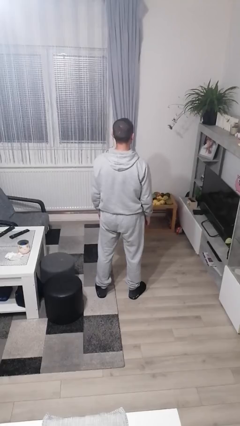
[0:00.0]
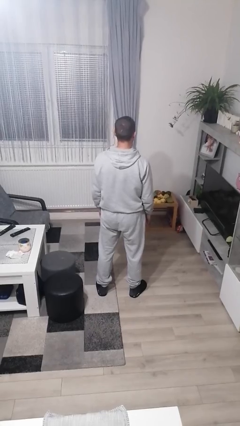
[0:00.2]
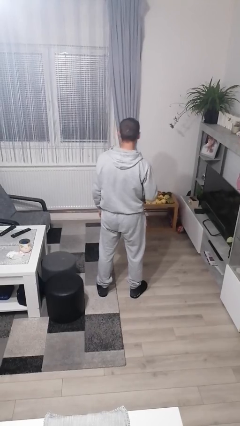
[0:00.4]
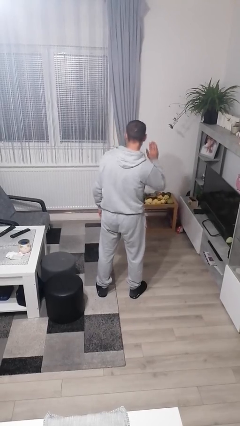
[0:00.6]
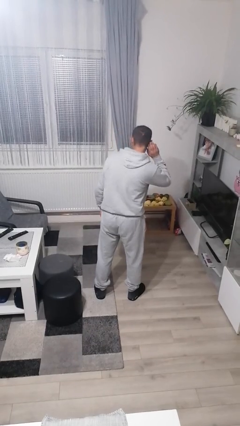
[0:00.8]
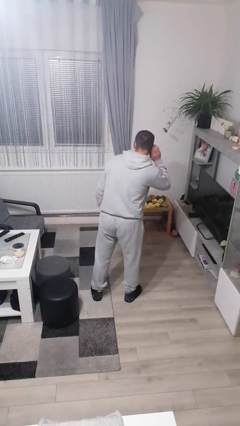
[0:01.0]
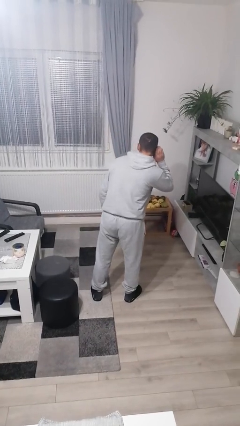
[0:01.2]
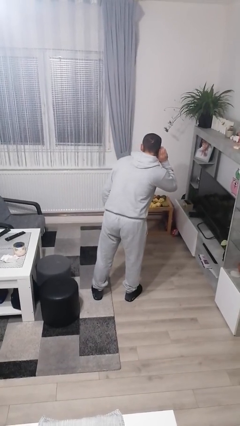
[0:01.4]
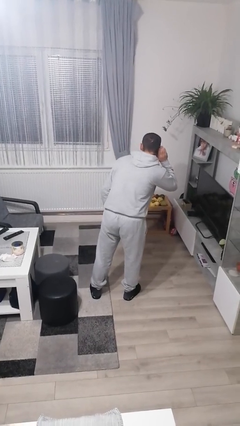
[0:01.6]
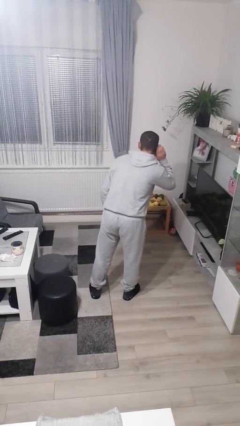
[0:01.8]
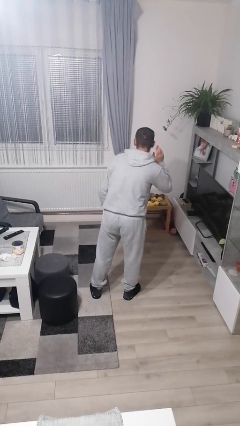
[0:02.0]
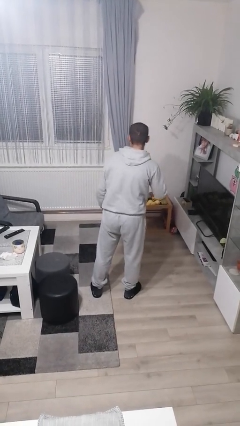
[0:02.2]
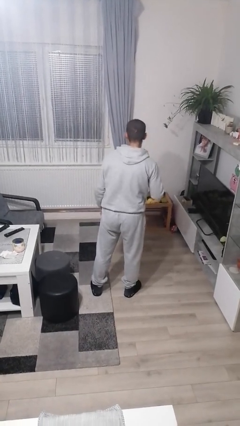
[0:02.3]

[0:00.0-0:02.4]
person gestures listen closely

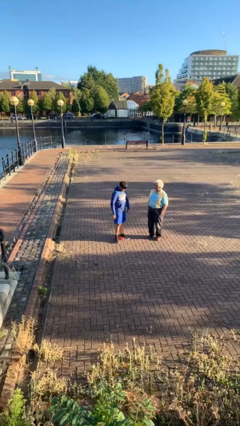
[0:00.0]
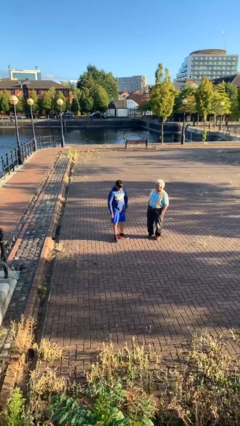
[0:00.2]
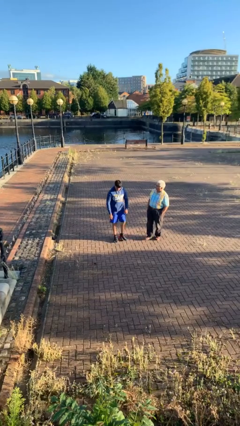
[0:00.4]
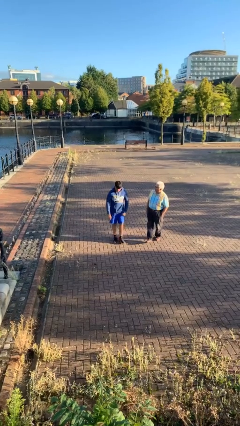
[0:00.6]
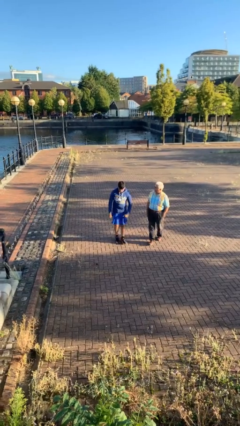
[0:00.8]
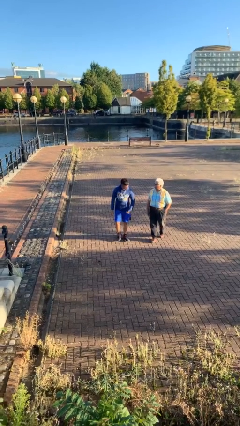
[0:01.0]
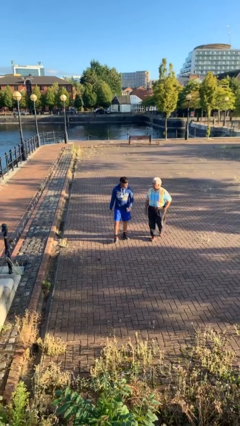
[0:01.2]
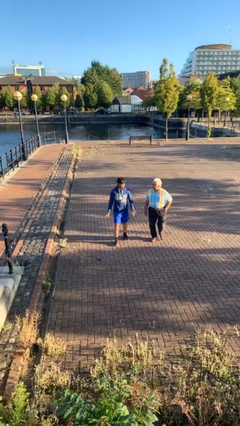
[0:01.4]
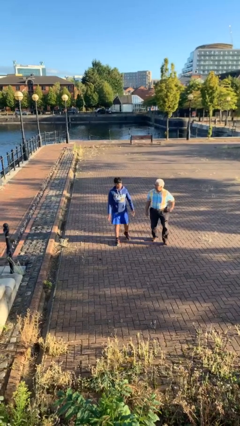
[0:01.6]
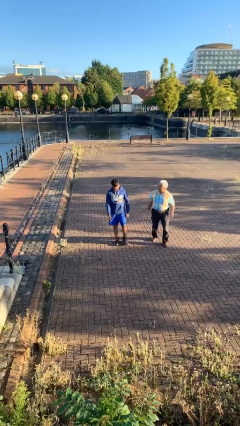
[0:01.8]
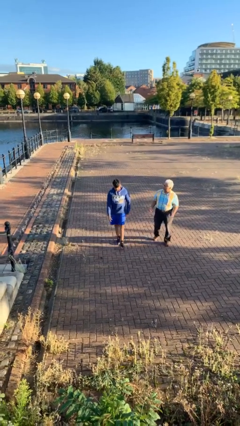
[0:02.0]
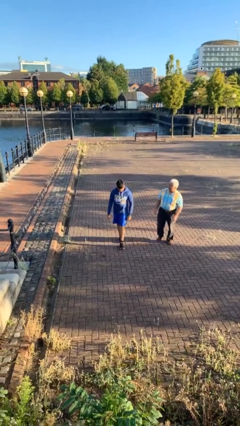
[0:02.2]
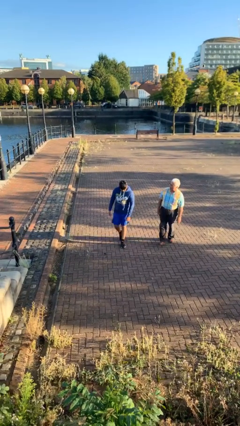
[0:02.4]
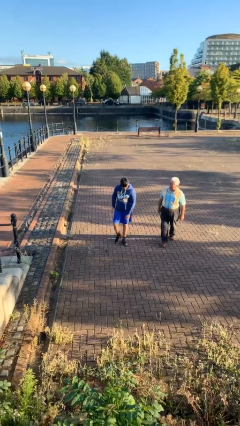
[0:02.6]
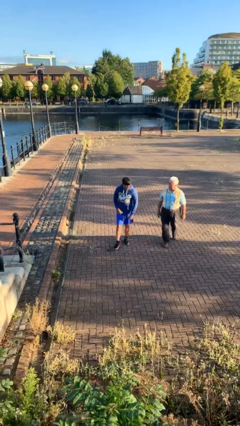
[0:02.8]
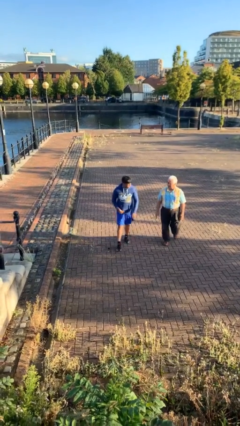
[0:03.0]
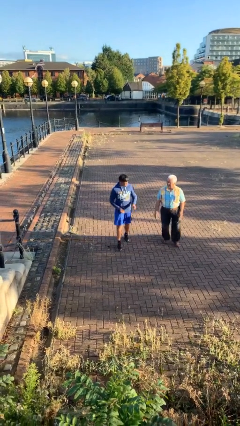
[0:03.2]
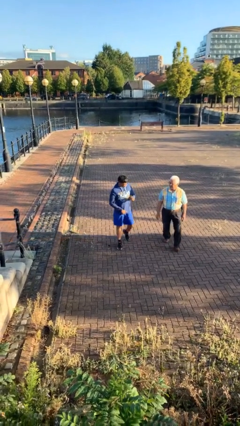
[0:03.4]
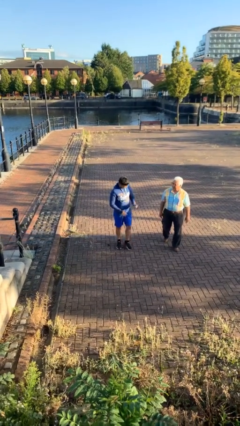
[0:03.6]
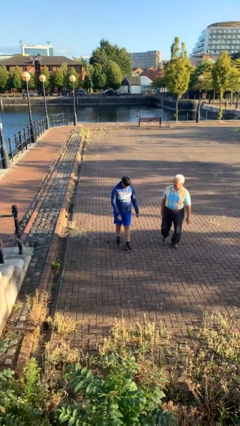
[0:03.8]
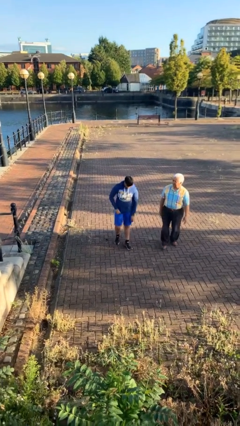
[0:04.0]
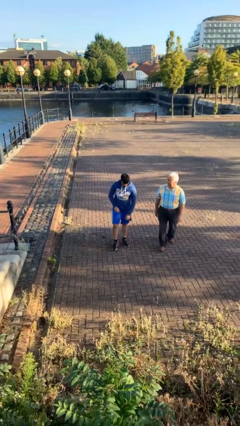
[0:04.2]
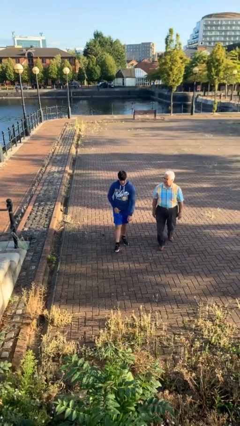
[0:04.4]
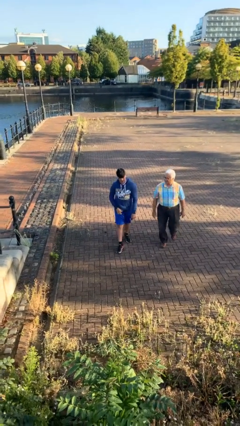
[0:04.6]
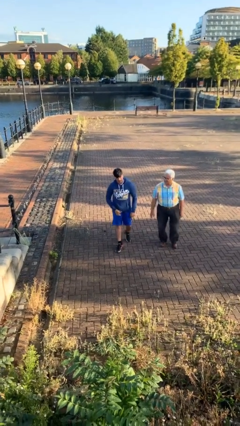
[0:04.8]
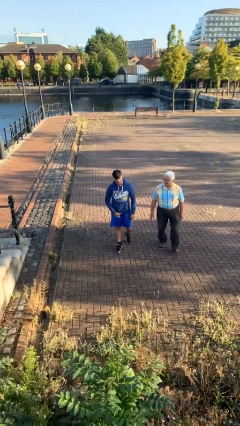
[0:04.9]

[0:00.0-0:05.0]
person talks to person

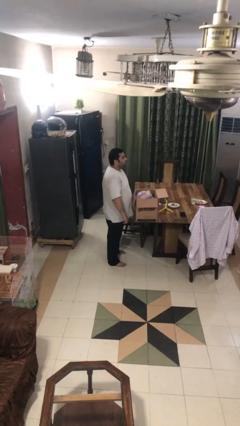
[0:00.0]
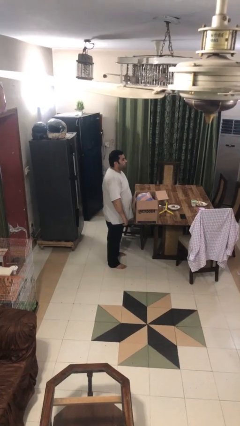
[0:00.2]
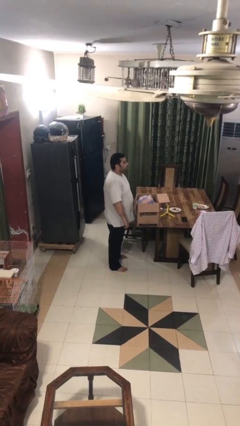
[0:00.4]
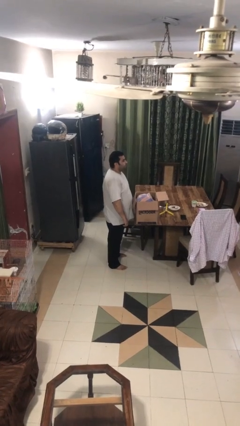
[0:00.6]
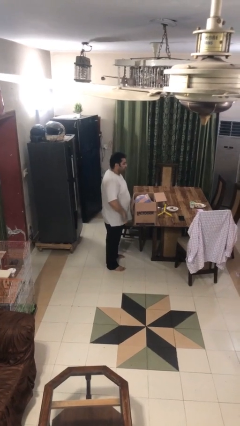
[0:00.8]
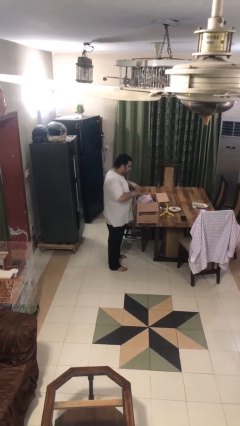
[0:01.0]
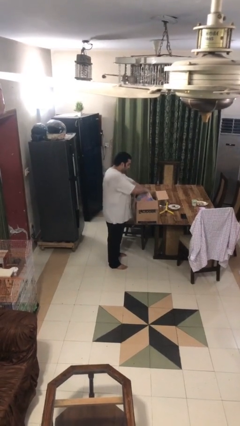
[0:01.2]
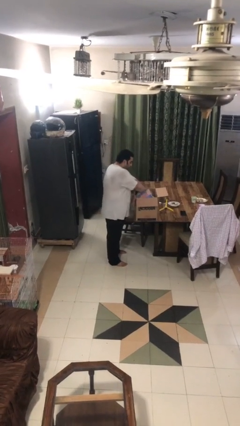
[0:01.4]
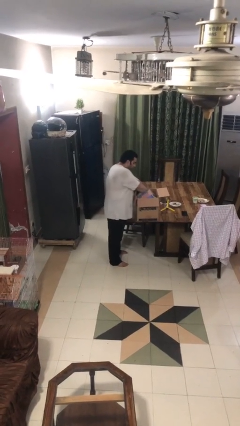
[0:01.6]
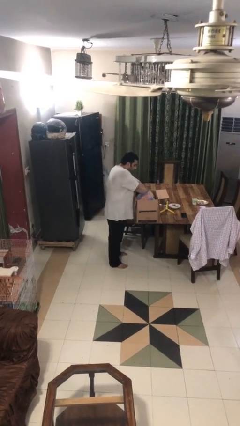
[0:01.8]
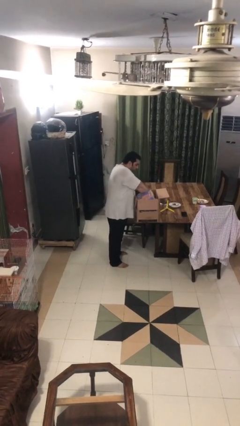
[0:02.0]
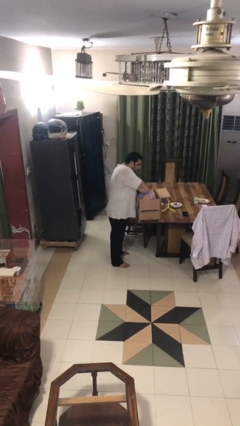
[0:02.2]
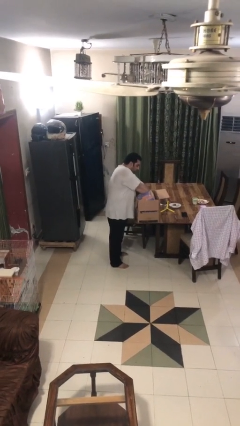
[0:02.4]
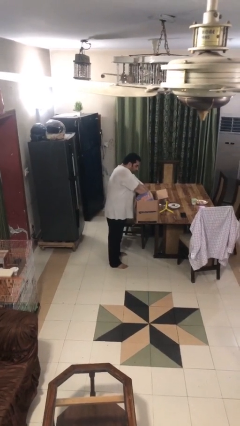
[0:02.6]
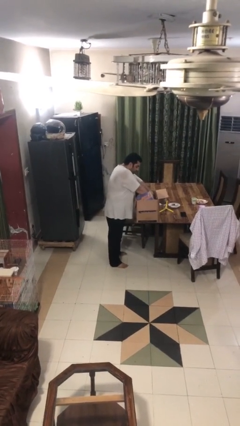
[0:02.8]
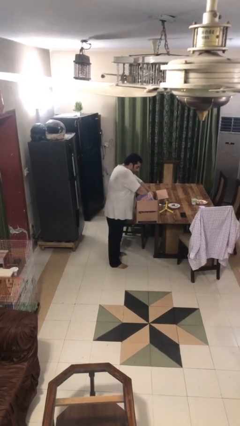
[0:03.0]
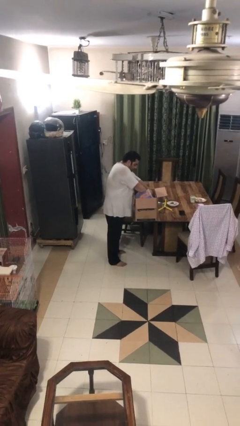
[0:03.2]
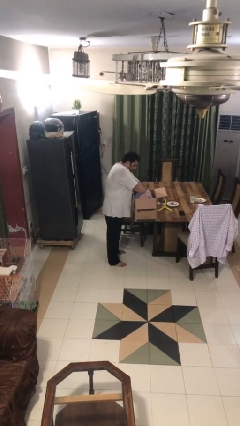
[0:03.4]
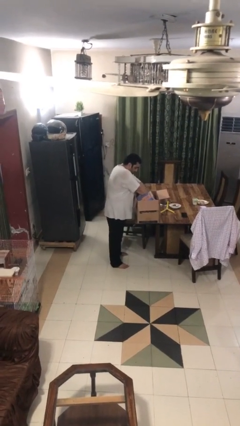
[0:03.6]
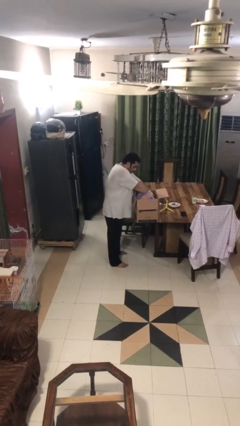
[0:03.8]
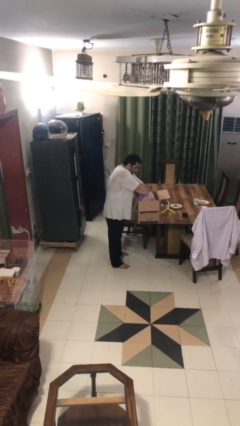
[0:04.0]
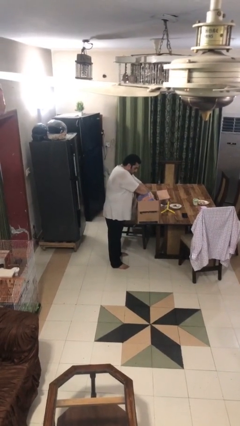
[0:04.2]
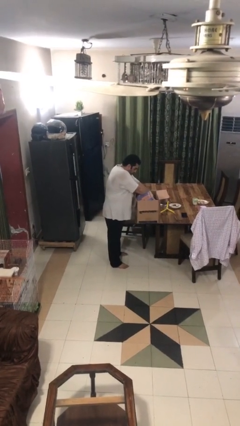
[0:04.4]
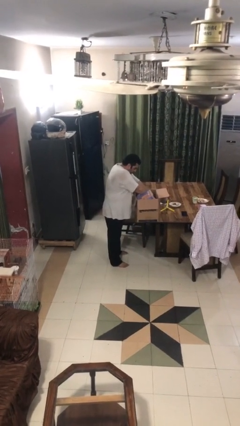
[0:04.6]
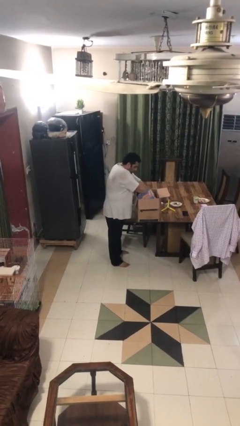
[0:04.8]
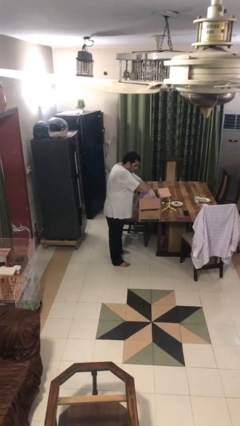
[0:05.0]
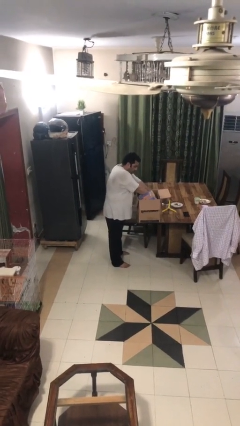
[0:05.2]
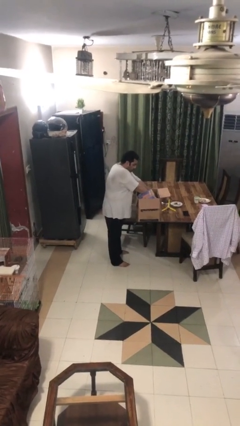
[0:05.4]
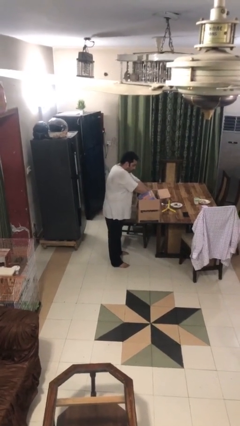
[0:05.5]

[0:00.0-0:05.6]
person searches in box

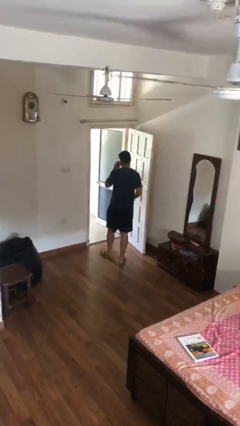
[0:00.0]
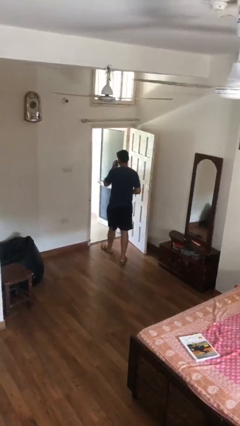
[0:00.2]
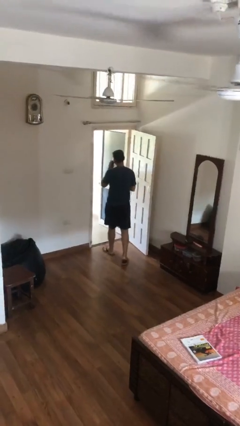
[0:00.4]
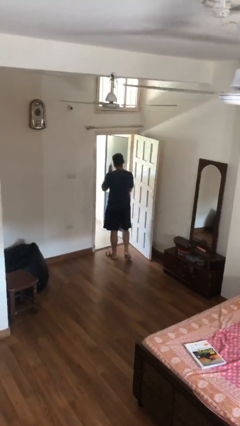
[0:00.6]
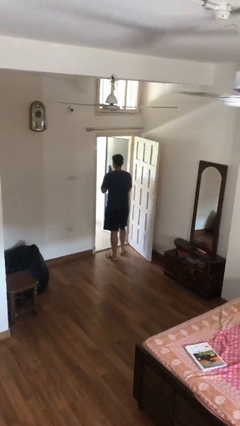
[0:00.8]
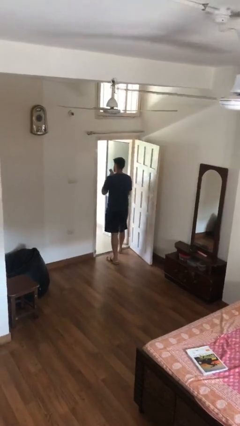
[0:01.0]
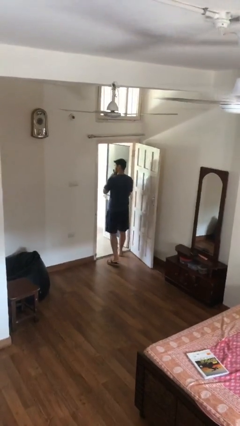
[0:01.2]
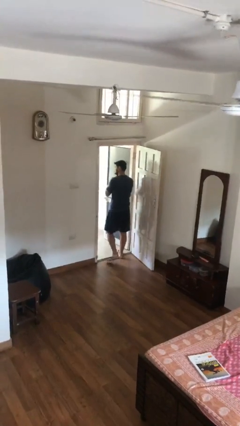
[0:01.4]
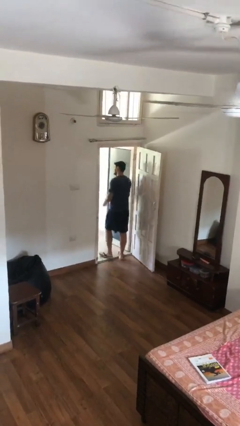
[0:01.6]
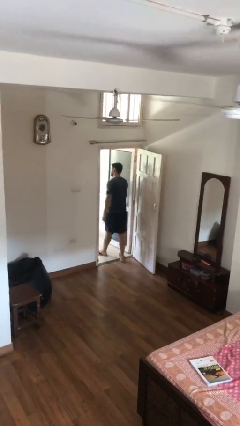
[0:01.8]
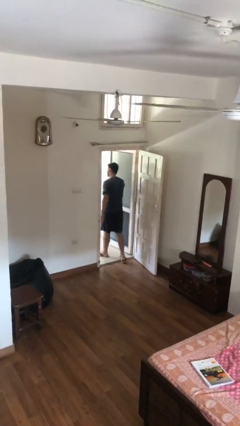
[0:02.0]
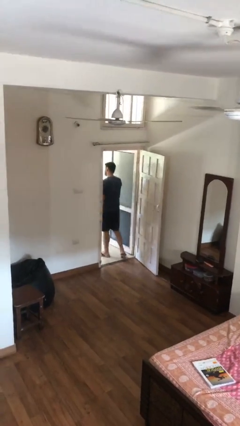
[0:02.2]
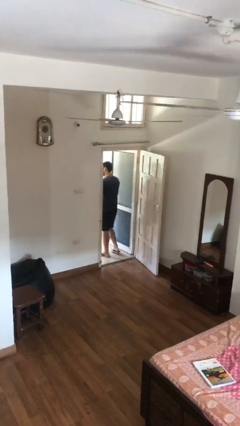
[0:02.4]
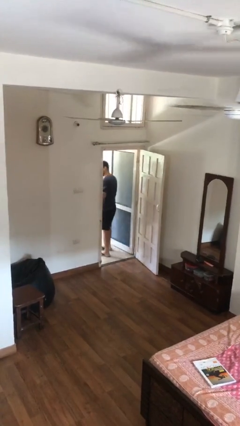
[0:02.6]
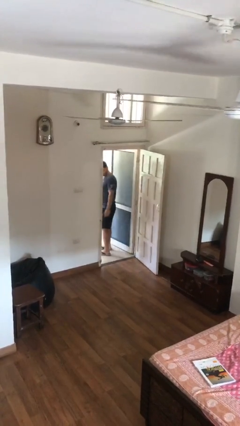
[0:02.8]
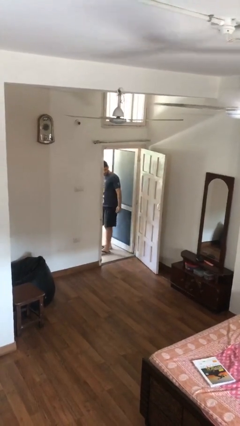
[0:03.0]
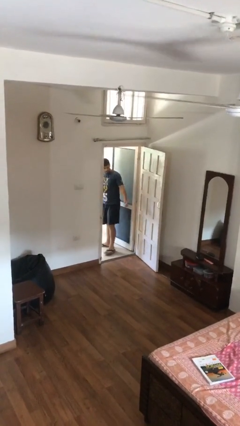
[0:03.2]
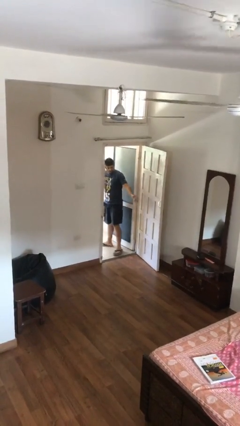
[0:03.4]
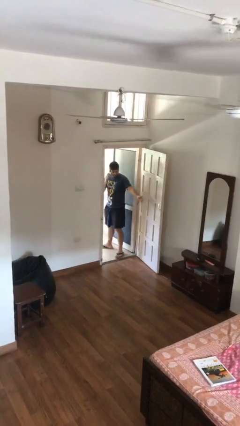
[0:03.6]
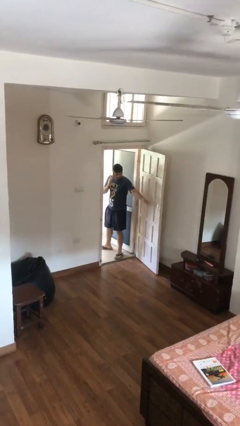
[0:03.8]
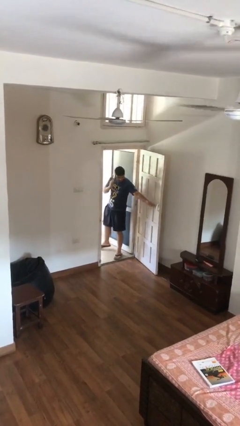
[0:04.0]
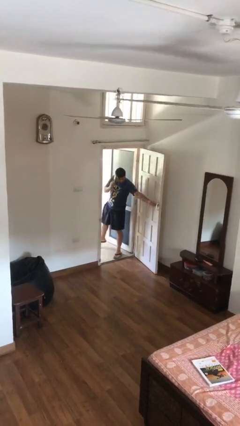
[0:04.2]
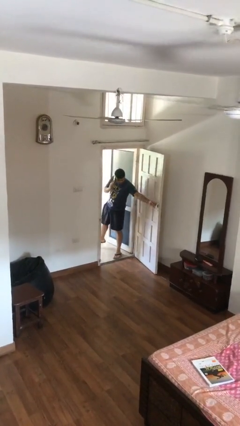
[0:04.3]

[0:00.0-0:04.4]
person exits scene through structure

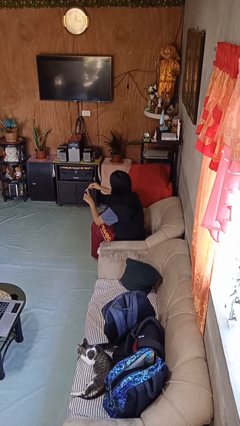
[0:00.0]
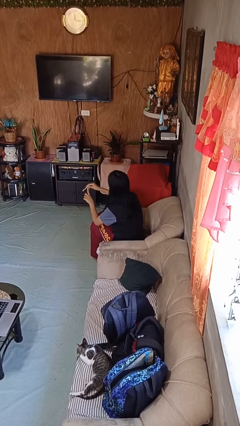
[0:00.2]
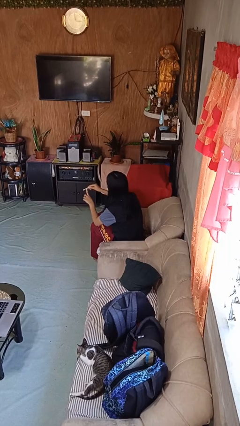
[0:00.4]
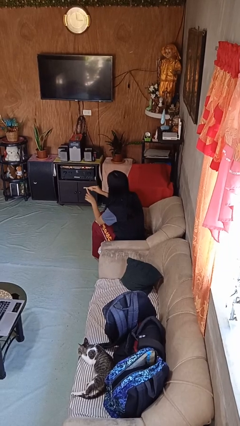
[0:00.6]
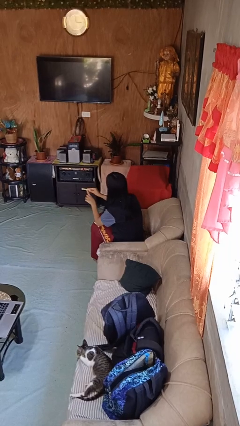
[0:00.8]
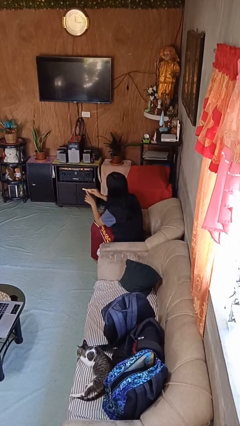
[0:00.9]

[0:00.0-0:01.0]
person files fingernails
